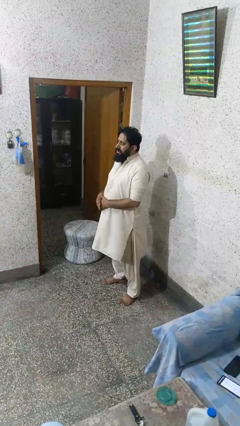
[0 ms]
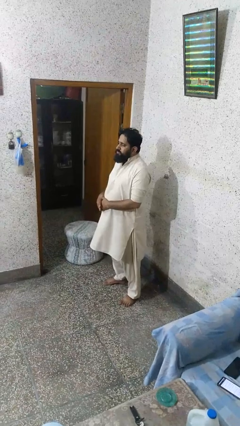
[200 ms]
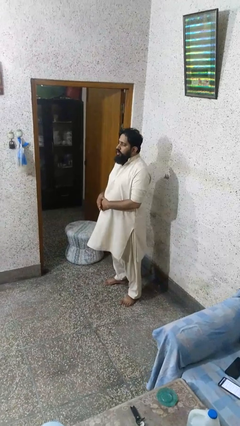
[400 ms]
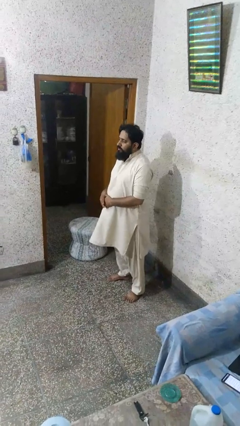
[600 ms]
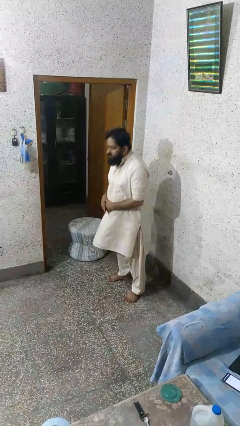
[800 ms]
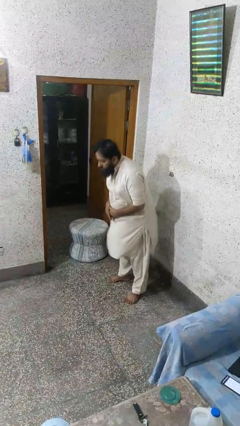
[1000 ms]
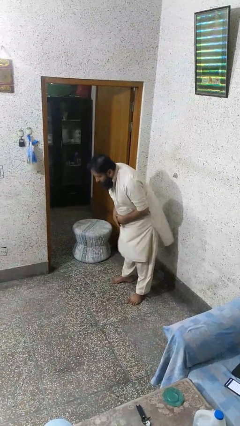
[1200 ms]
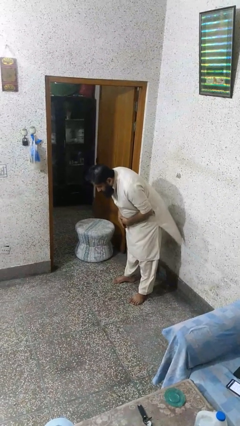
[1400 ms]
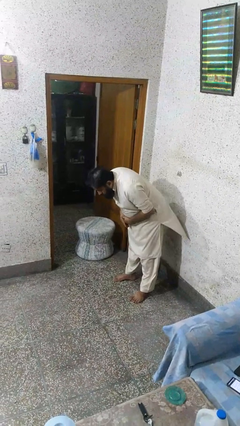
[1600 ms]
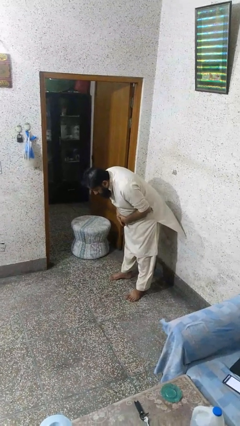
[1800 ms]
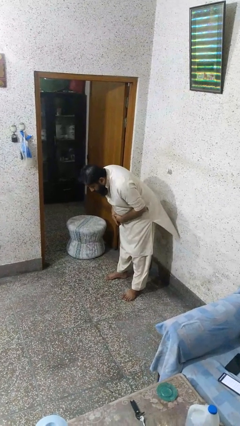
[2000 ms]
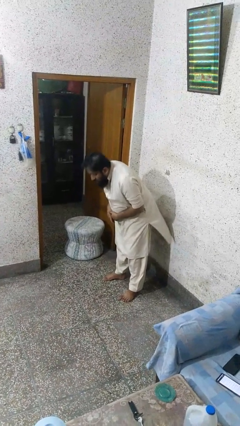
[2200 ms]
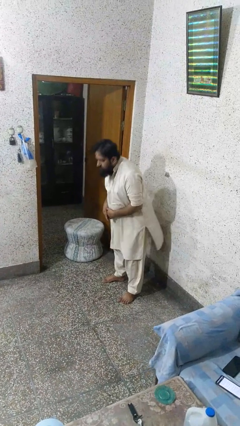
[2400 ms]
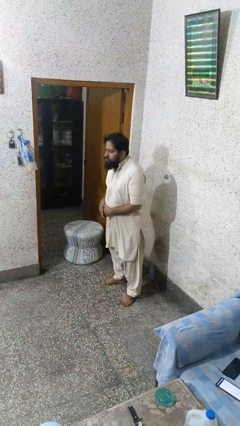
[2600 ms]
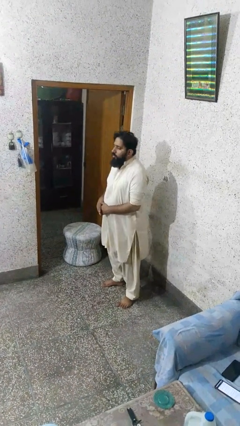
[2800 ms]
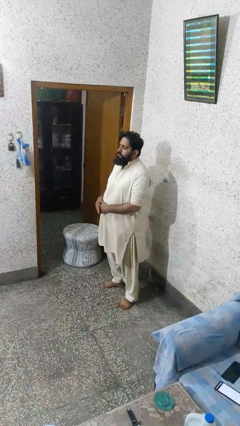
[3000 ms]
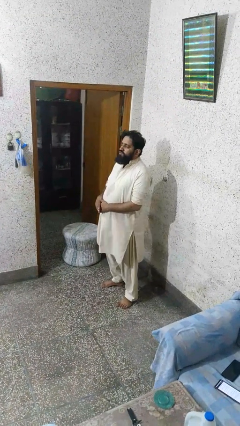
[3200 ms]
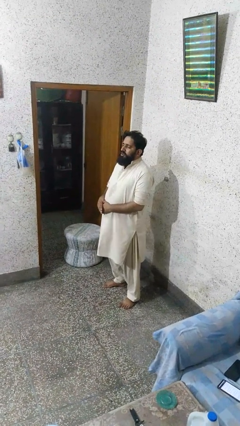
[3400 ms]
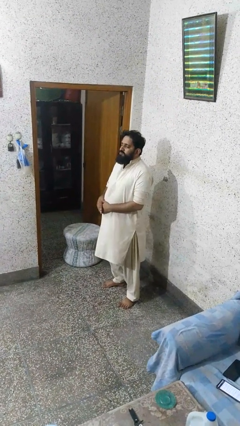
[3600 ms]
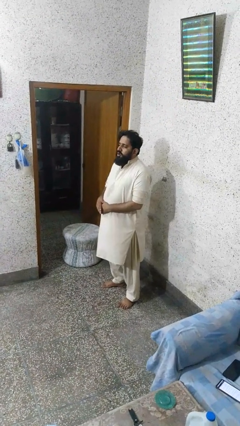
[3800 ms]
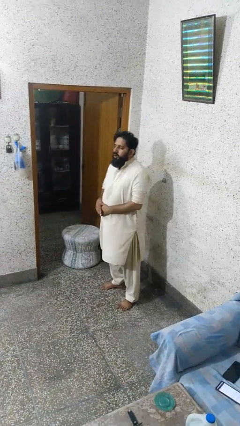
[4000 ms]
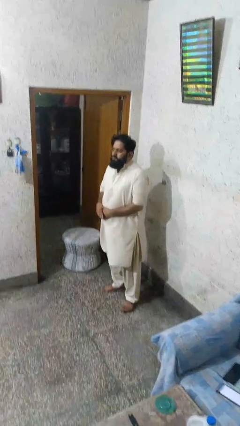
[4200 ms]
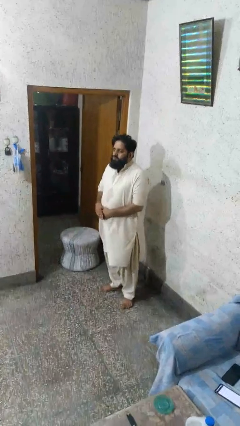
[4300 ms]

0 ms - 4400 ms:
person bows

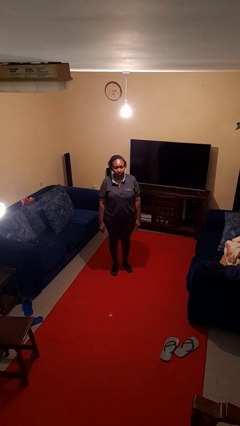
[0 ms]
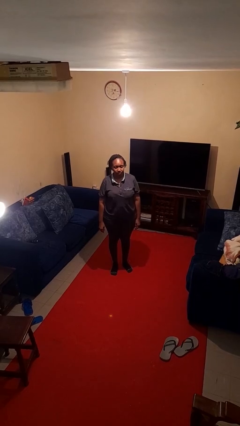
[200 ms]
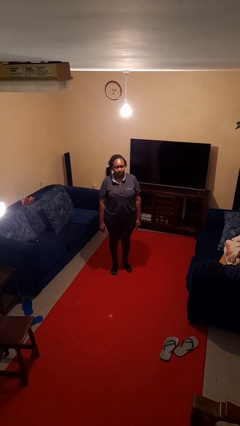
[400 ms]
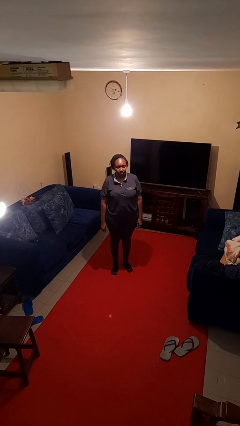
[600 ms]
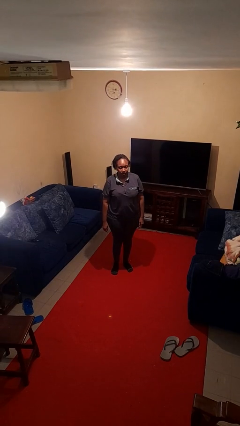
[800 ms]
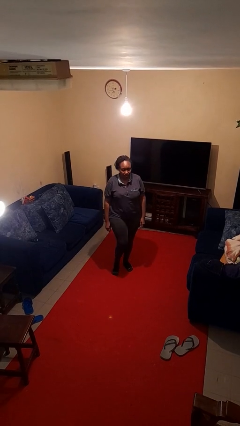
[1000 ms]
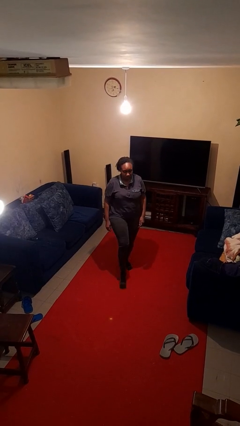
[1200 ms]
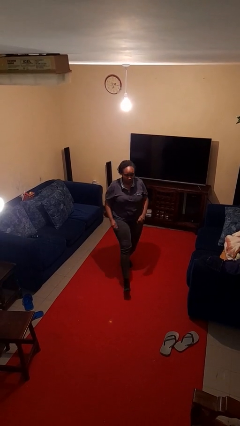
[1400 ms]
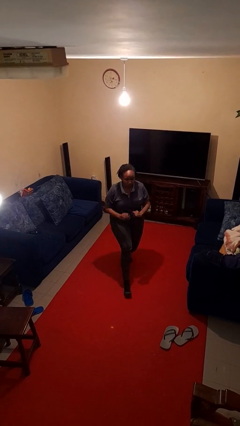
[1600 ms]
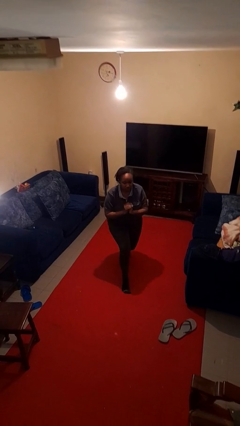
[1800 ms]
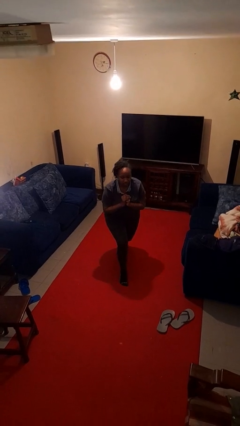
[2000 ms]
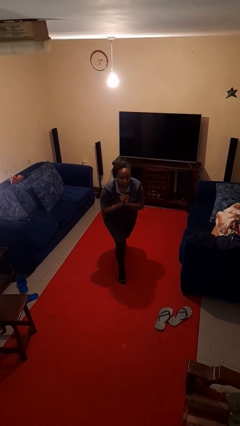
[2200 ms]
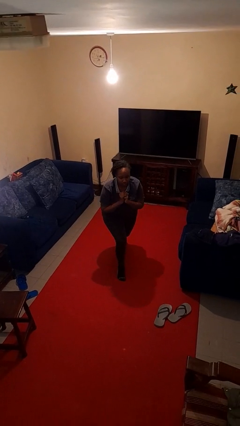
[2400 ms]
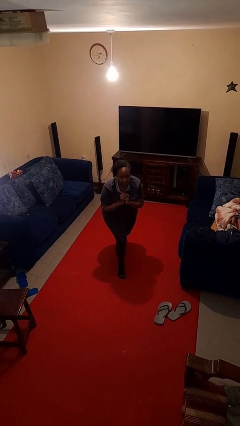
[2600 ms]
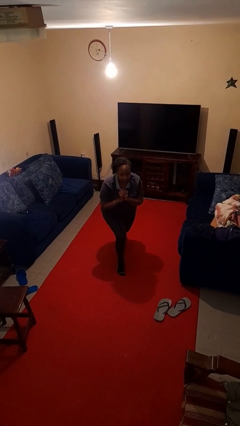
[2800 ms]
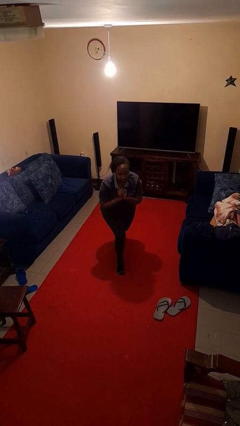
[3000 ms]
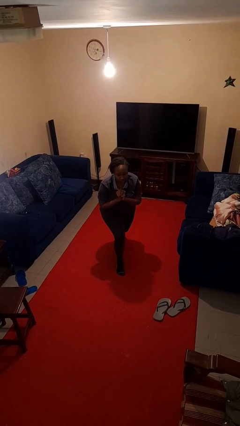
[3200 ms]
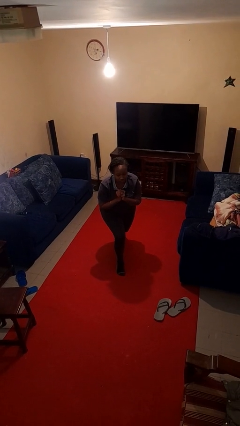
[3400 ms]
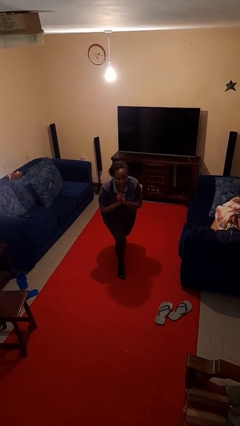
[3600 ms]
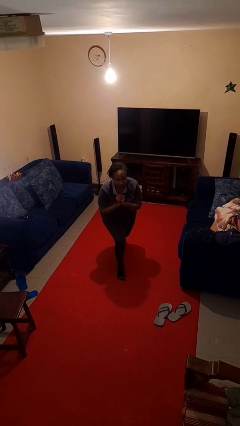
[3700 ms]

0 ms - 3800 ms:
person exercises with lunges

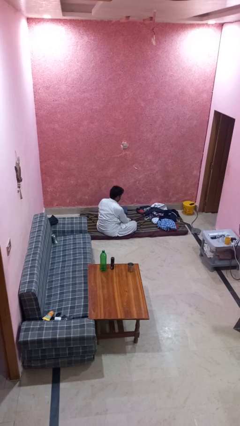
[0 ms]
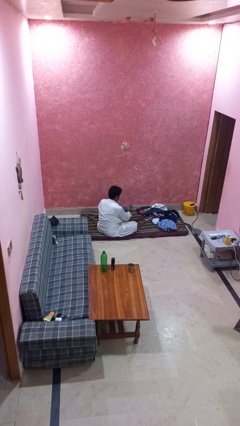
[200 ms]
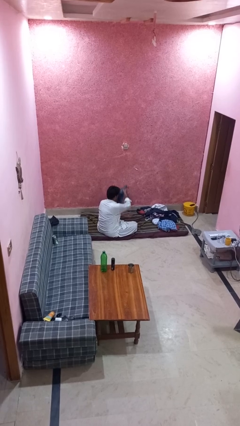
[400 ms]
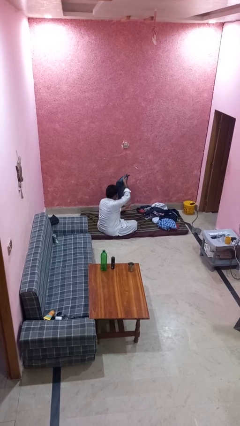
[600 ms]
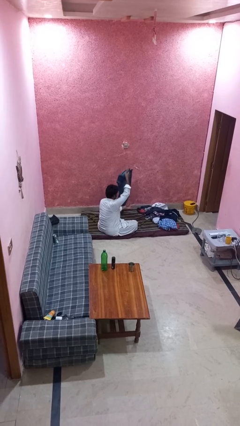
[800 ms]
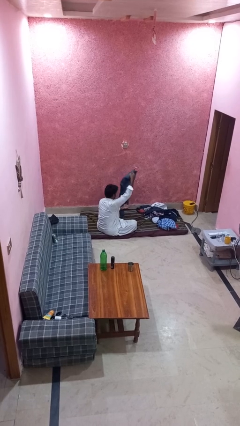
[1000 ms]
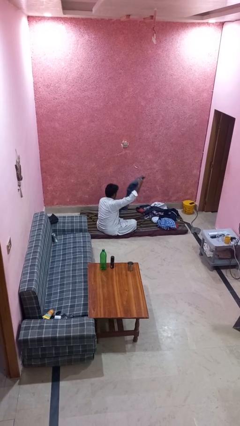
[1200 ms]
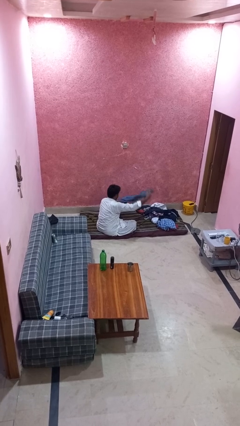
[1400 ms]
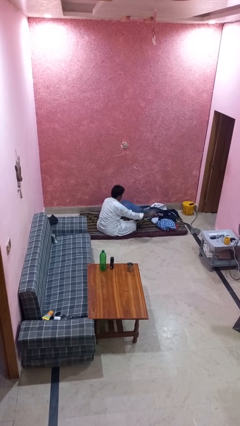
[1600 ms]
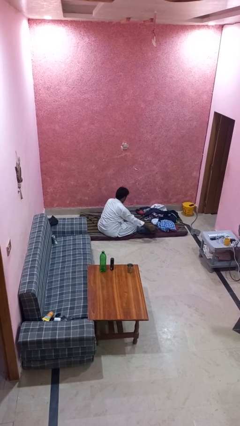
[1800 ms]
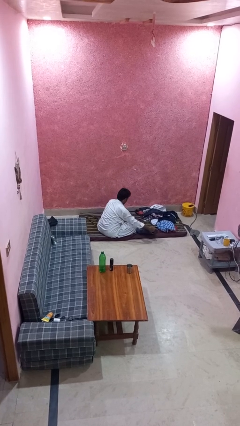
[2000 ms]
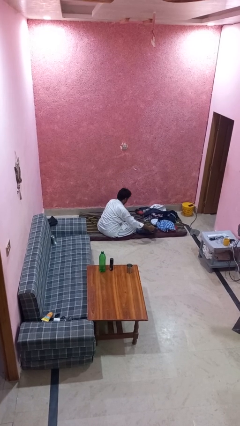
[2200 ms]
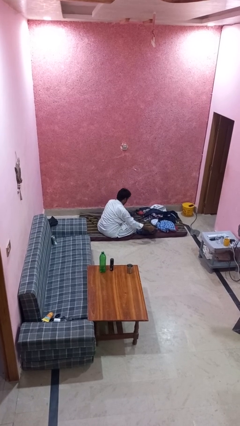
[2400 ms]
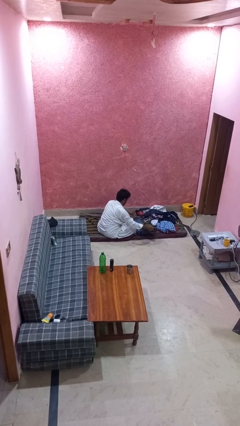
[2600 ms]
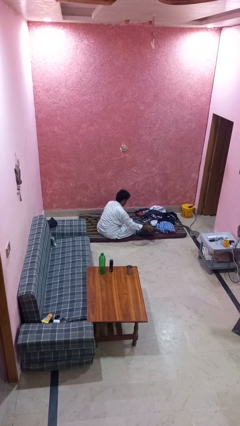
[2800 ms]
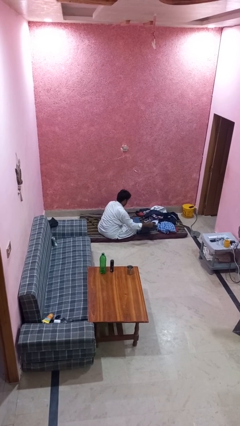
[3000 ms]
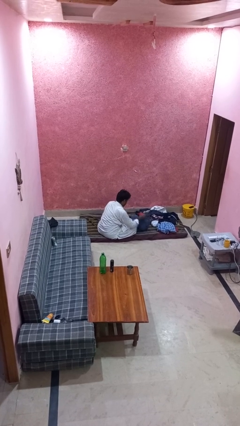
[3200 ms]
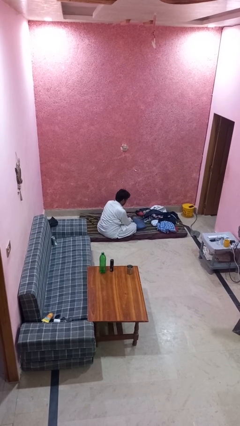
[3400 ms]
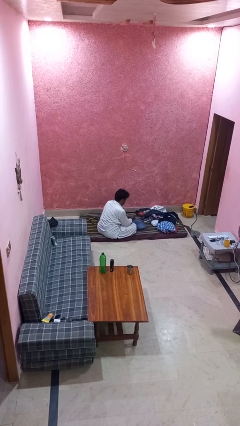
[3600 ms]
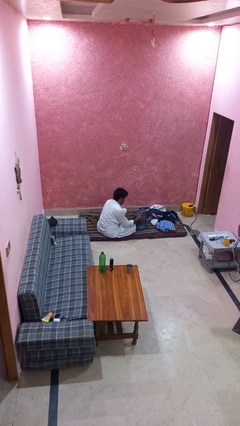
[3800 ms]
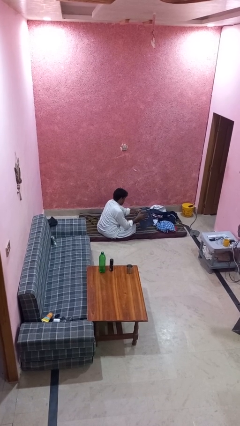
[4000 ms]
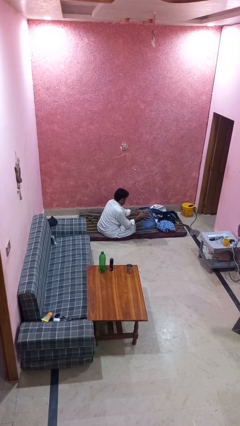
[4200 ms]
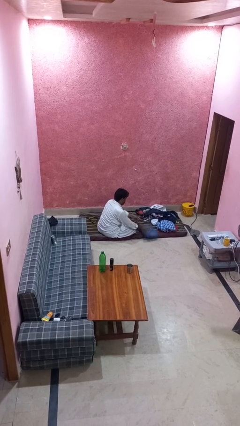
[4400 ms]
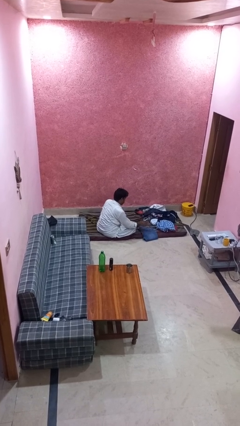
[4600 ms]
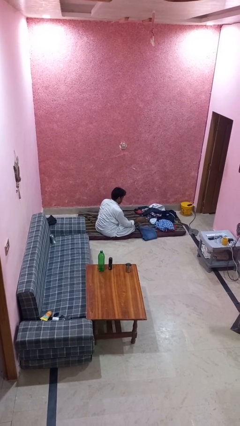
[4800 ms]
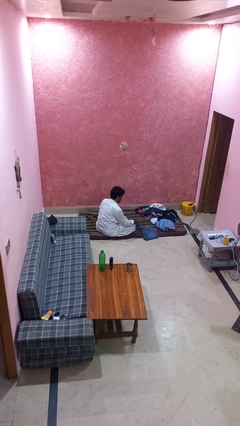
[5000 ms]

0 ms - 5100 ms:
person folds pants

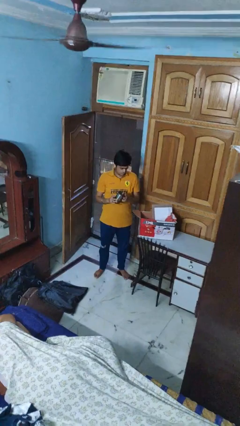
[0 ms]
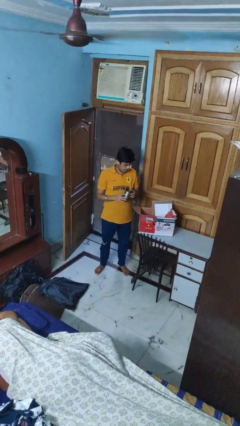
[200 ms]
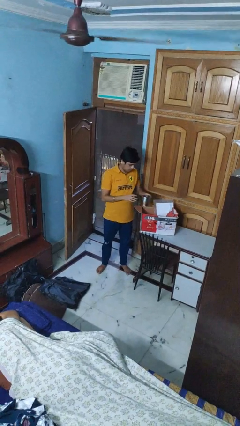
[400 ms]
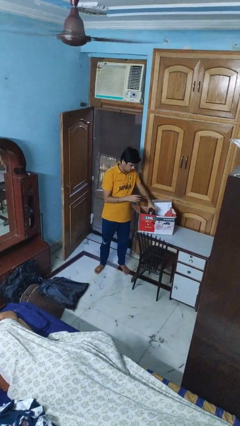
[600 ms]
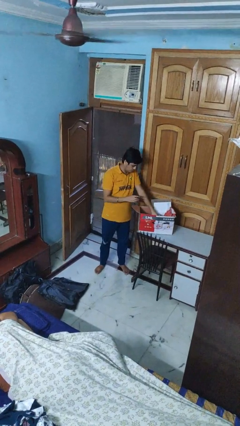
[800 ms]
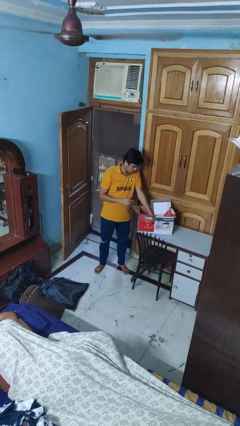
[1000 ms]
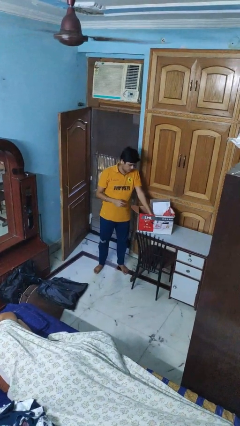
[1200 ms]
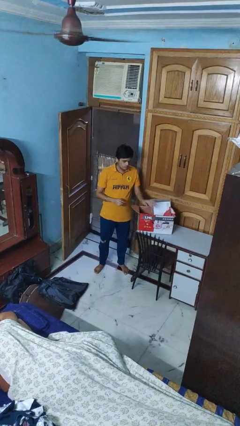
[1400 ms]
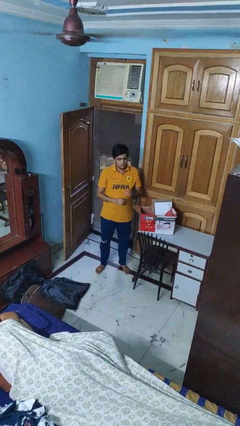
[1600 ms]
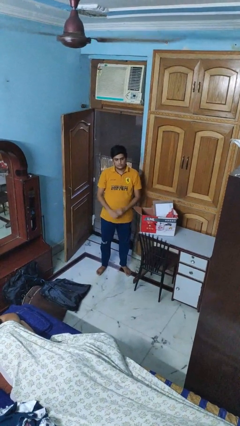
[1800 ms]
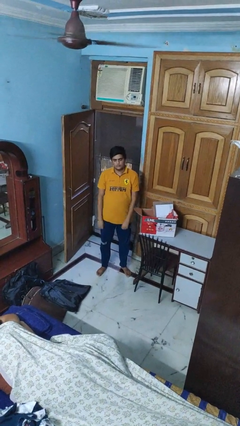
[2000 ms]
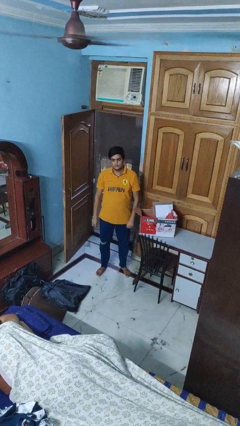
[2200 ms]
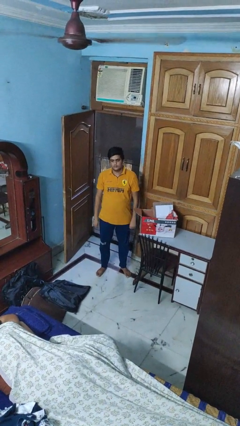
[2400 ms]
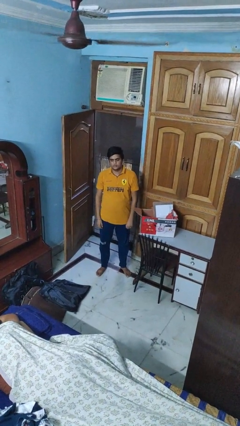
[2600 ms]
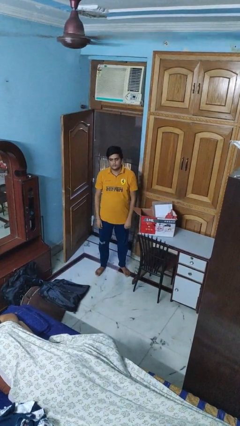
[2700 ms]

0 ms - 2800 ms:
person puts object into box

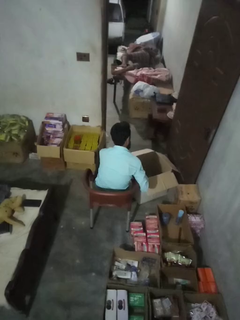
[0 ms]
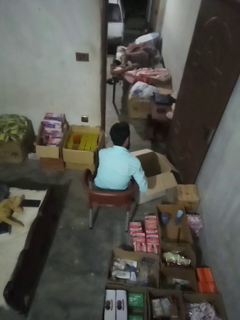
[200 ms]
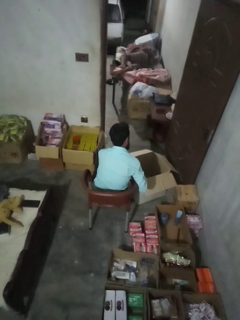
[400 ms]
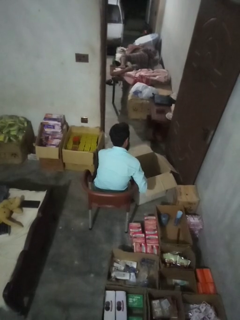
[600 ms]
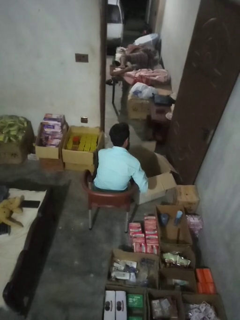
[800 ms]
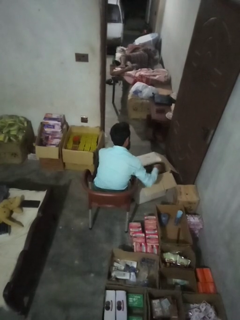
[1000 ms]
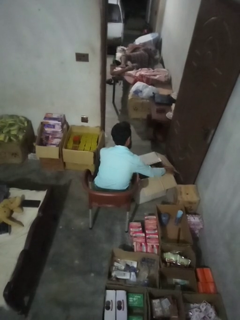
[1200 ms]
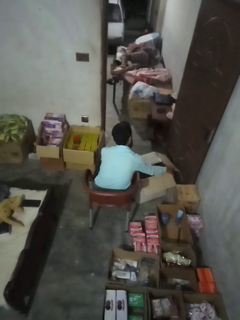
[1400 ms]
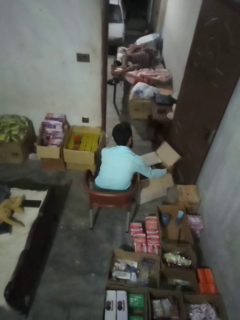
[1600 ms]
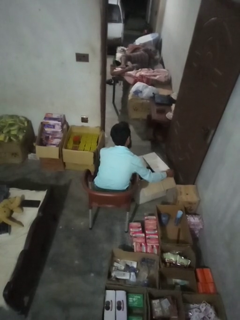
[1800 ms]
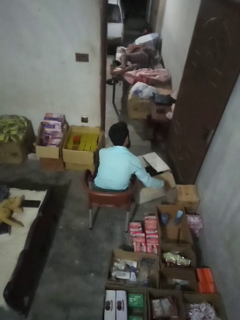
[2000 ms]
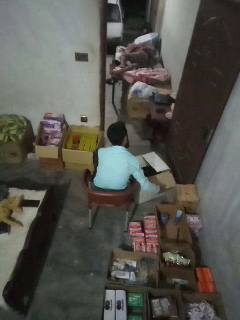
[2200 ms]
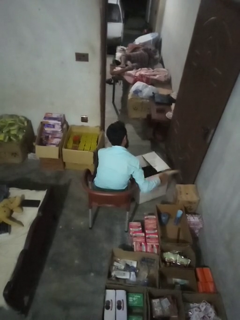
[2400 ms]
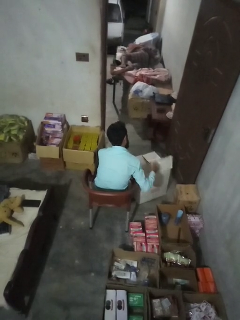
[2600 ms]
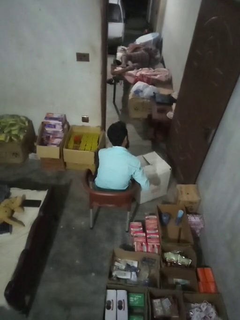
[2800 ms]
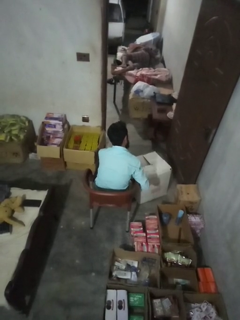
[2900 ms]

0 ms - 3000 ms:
person closes box
